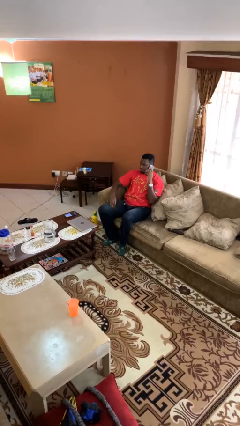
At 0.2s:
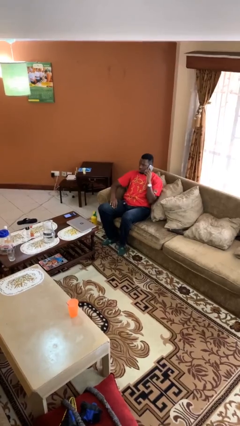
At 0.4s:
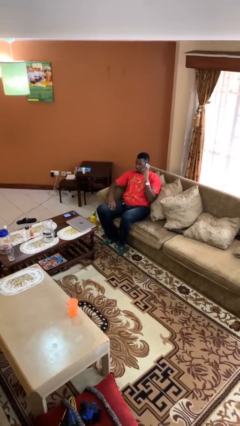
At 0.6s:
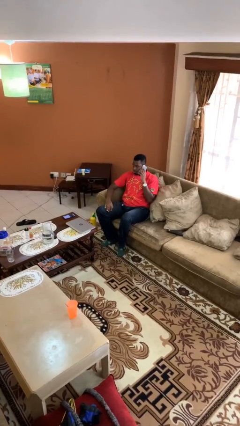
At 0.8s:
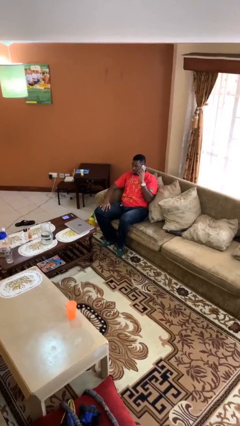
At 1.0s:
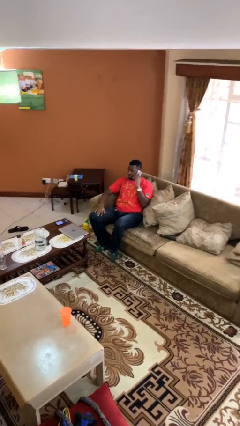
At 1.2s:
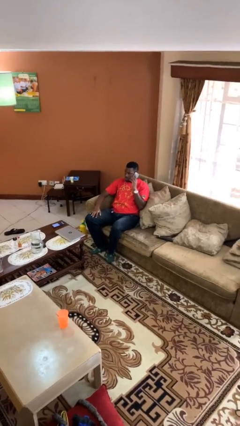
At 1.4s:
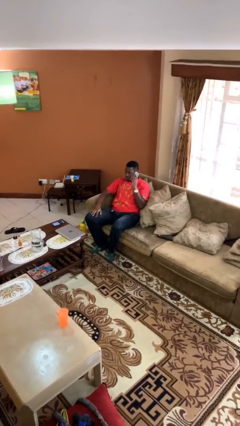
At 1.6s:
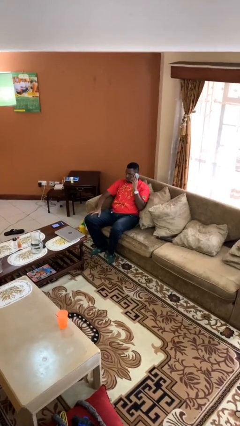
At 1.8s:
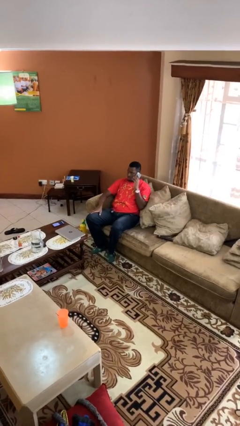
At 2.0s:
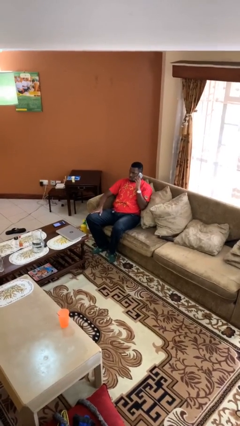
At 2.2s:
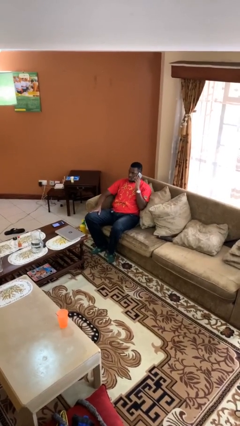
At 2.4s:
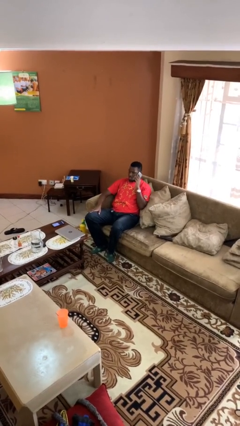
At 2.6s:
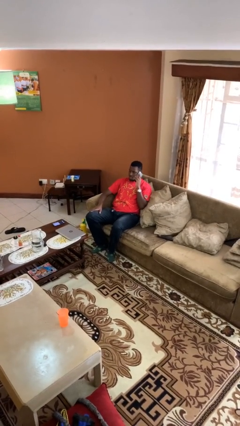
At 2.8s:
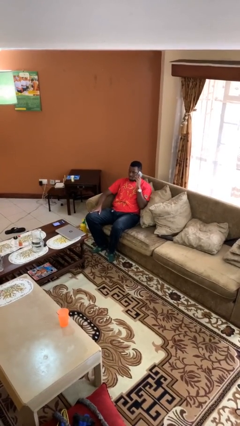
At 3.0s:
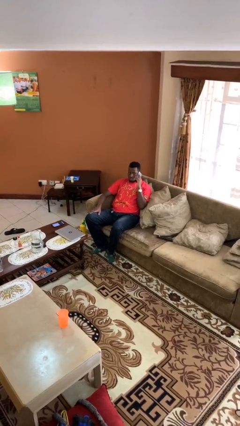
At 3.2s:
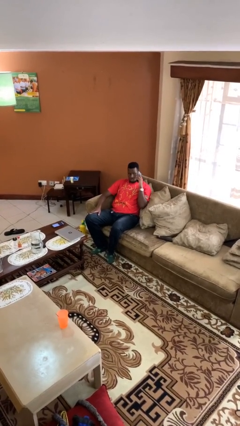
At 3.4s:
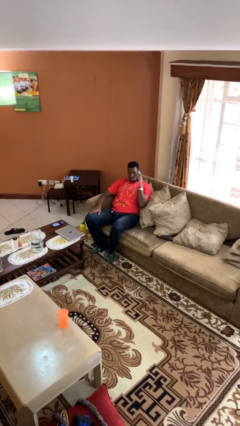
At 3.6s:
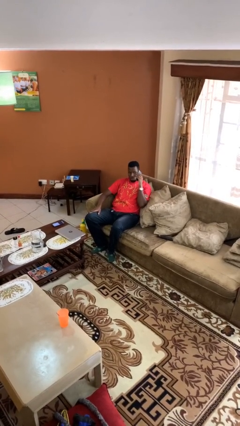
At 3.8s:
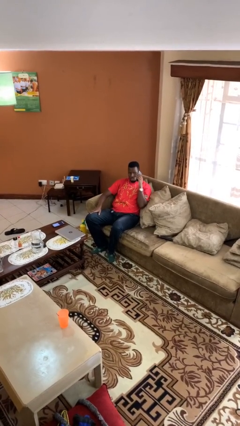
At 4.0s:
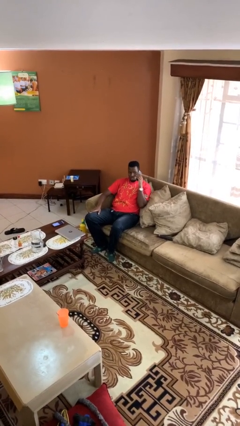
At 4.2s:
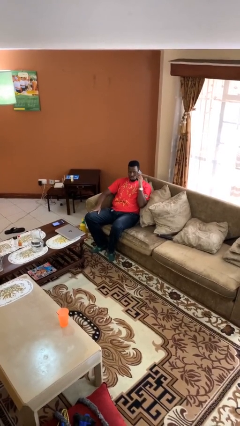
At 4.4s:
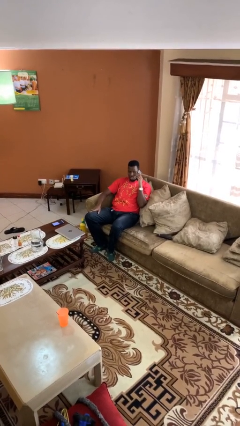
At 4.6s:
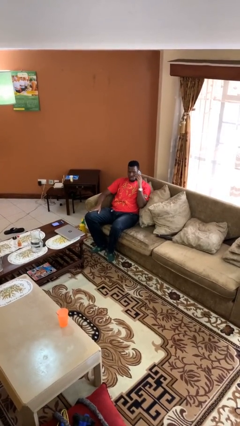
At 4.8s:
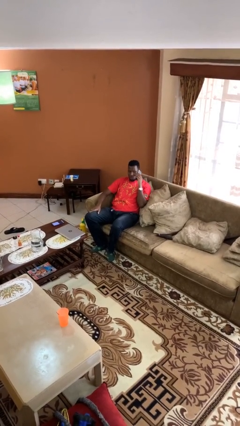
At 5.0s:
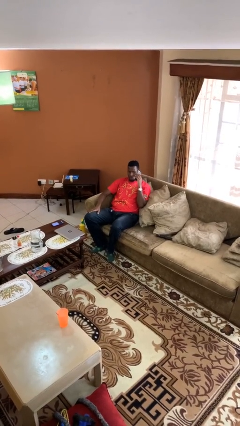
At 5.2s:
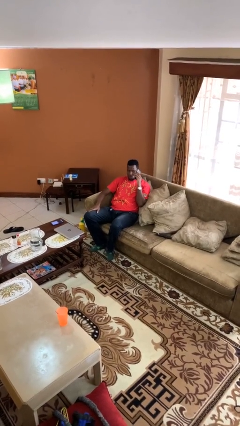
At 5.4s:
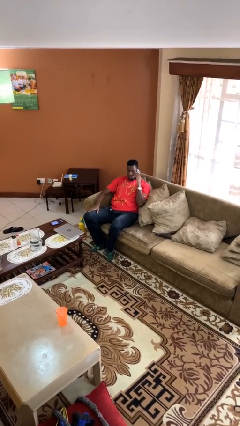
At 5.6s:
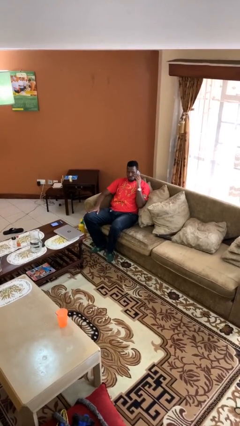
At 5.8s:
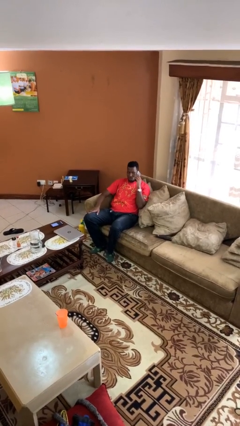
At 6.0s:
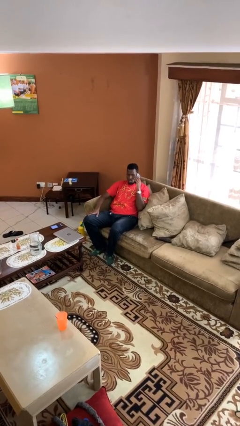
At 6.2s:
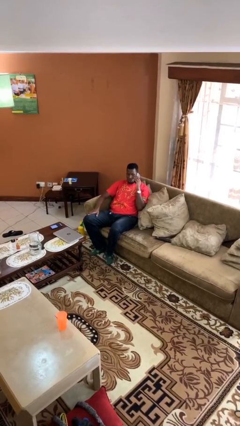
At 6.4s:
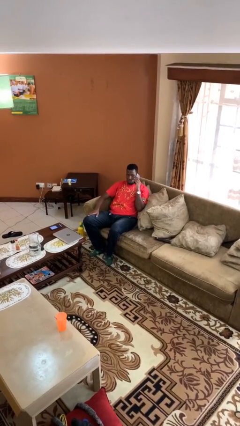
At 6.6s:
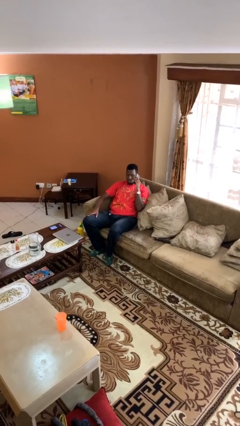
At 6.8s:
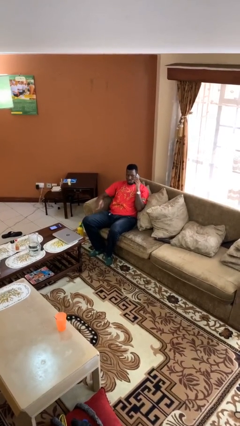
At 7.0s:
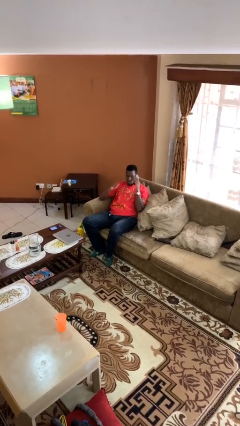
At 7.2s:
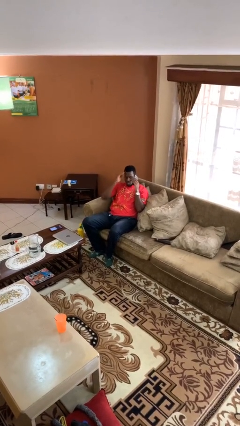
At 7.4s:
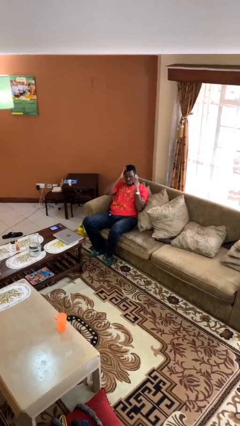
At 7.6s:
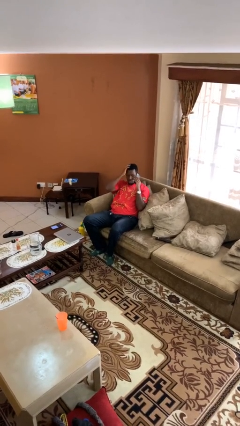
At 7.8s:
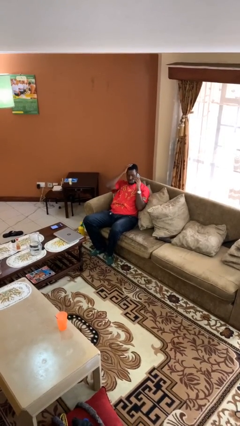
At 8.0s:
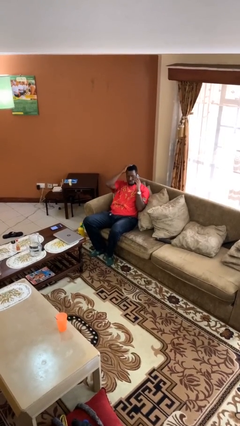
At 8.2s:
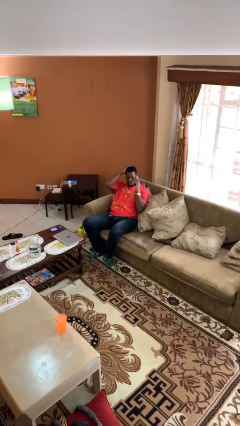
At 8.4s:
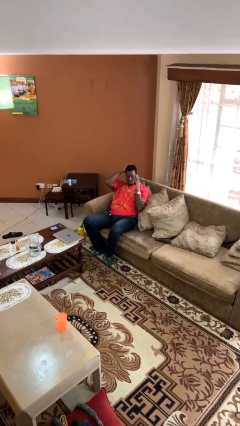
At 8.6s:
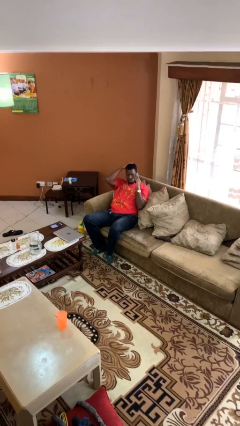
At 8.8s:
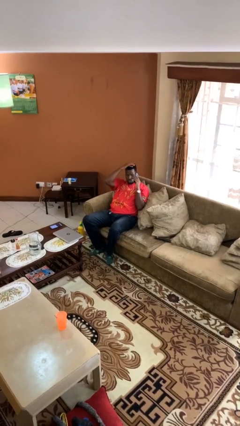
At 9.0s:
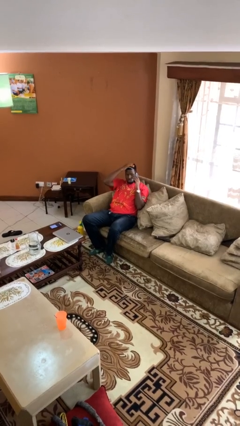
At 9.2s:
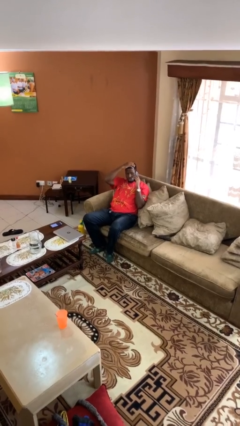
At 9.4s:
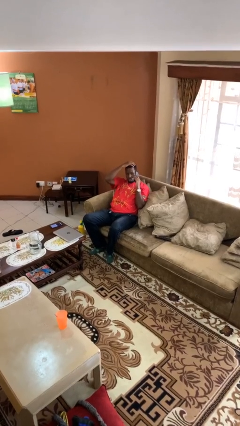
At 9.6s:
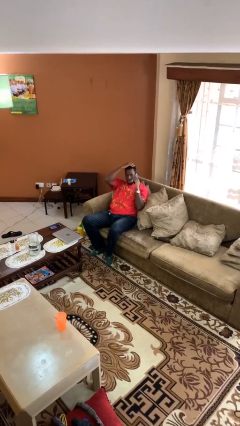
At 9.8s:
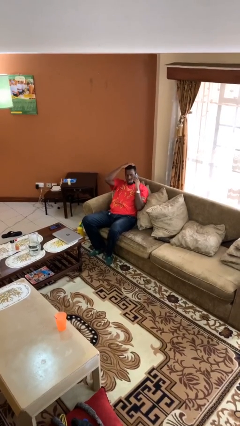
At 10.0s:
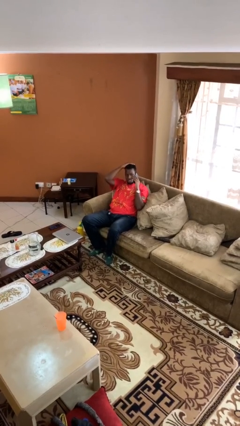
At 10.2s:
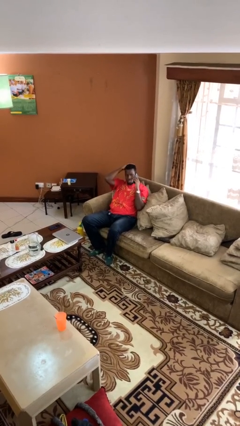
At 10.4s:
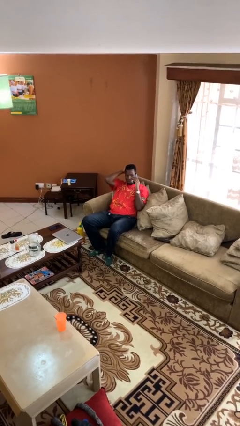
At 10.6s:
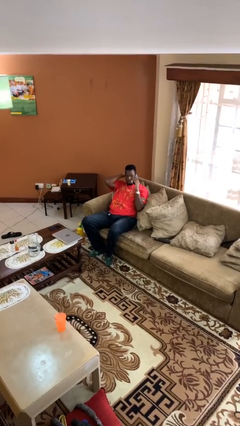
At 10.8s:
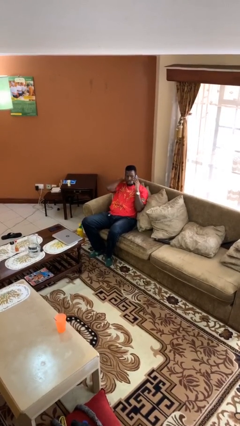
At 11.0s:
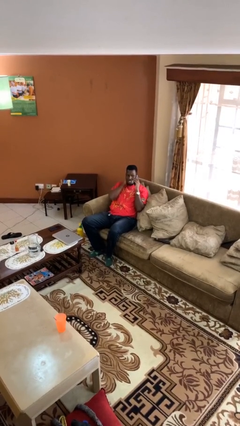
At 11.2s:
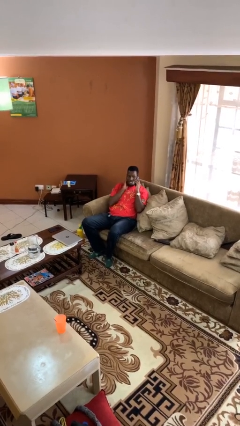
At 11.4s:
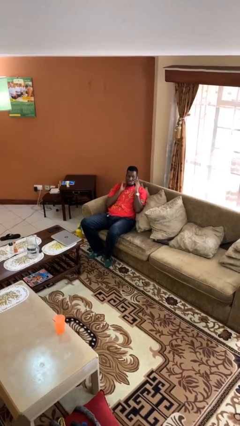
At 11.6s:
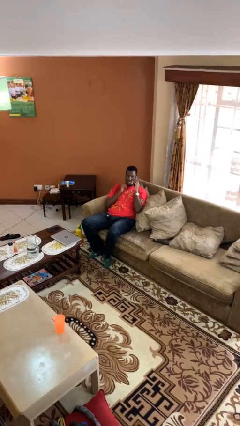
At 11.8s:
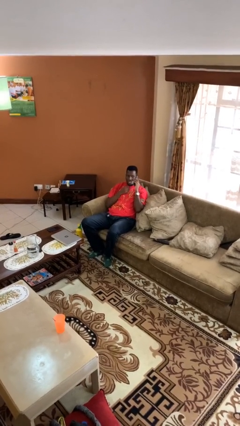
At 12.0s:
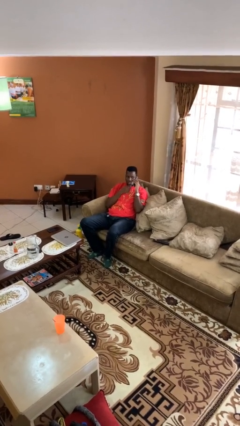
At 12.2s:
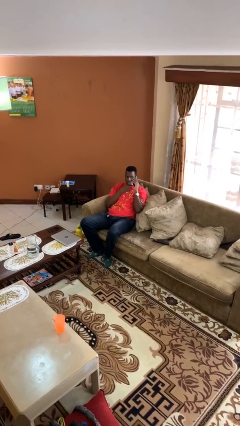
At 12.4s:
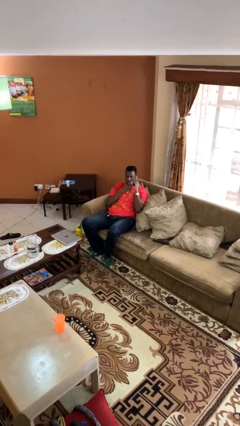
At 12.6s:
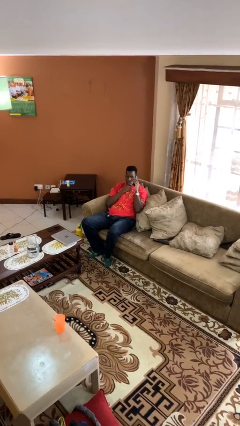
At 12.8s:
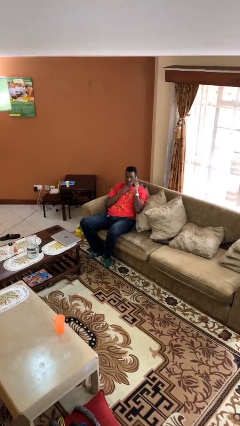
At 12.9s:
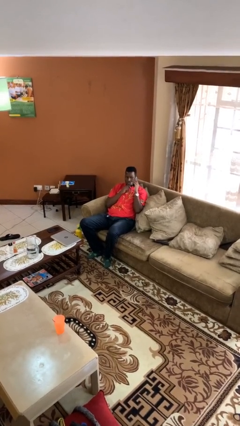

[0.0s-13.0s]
person talks on phone

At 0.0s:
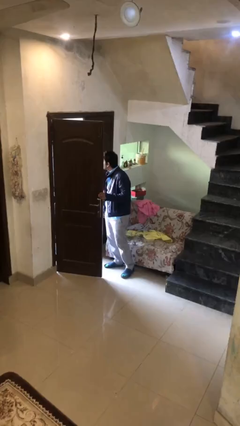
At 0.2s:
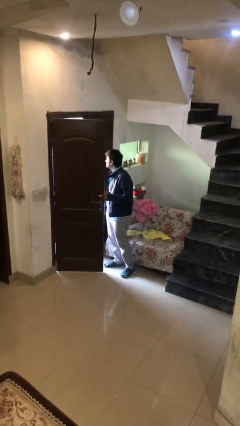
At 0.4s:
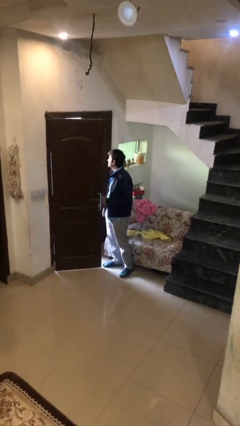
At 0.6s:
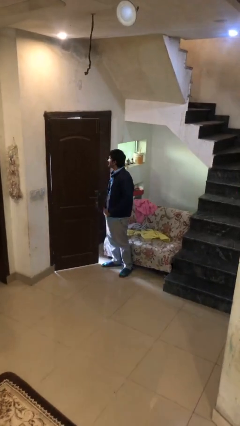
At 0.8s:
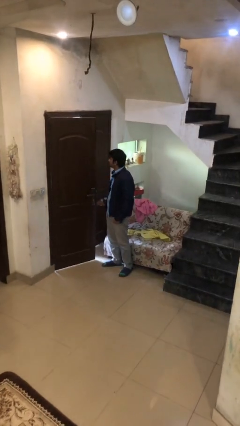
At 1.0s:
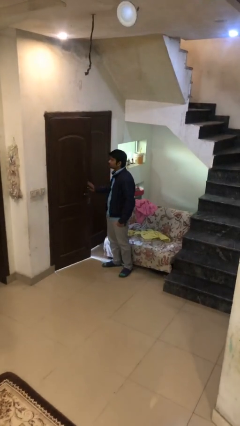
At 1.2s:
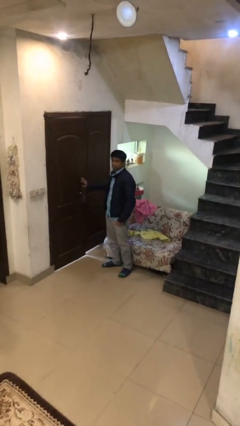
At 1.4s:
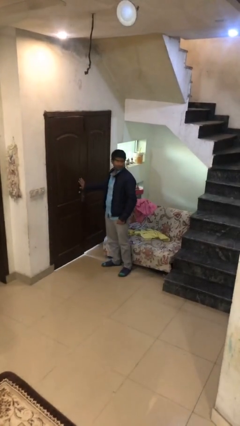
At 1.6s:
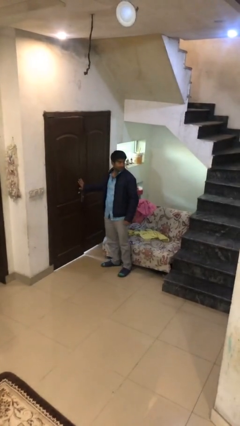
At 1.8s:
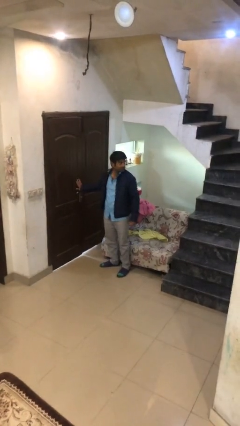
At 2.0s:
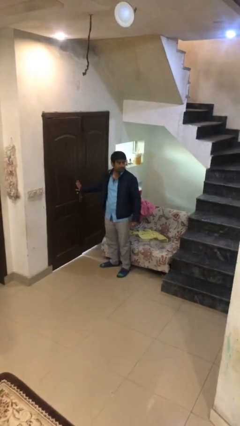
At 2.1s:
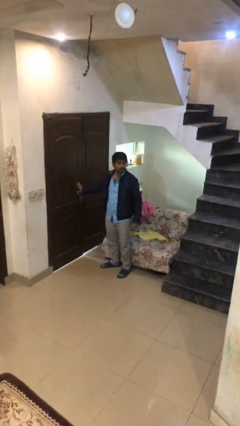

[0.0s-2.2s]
person closes facility door

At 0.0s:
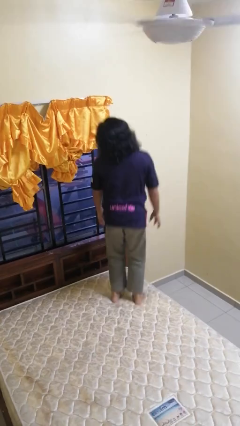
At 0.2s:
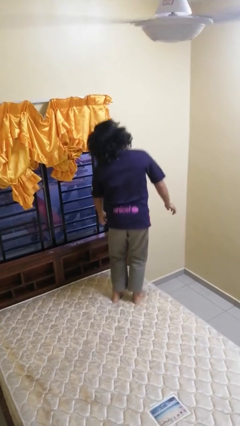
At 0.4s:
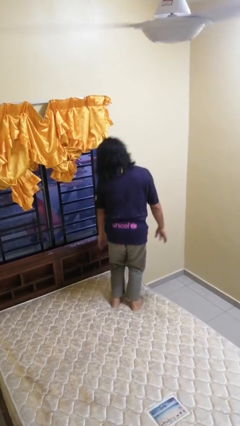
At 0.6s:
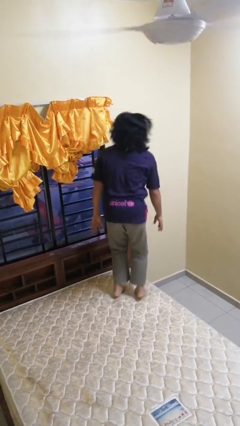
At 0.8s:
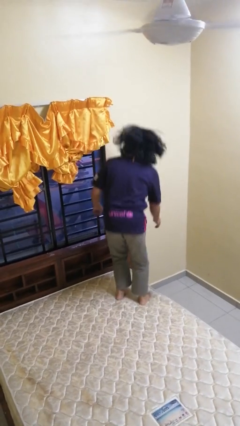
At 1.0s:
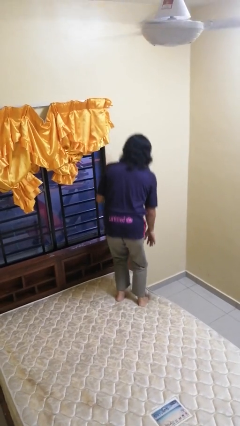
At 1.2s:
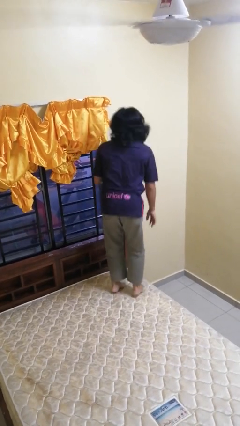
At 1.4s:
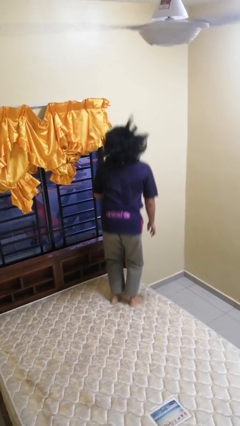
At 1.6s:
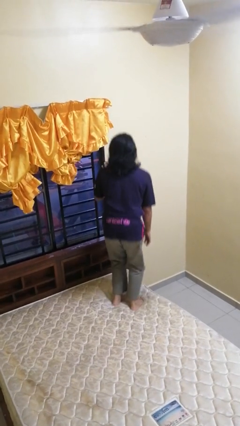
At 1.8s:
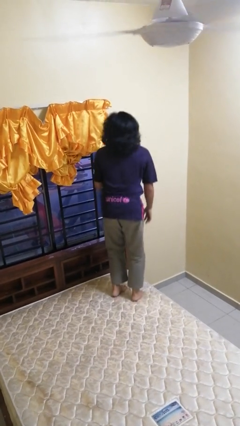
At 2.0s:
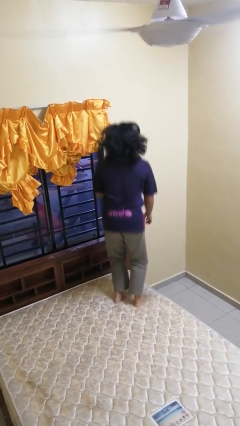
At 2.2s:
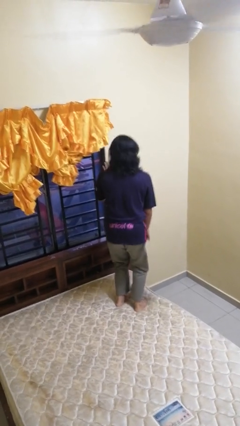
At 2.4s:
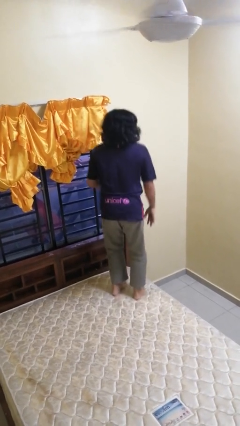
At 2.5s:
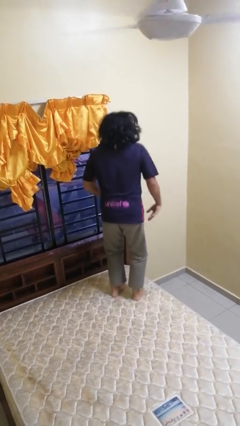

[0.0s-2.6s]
person jumps on bed
